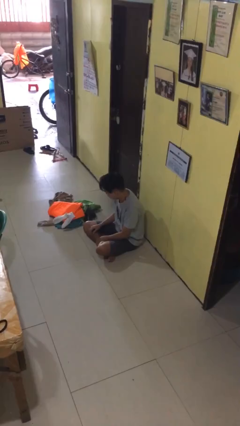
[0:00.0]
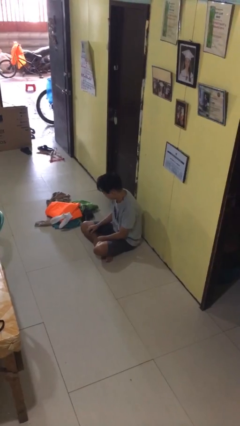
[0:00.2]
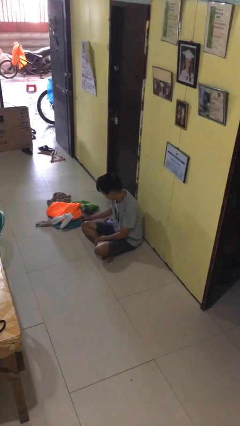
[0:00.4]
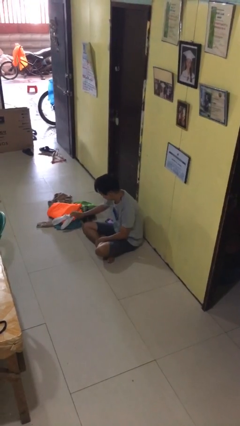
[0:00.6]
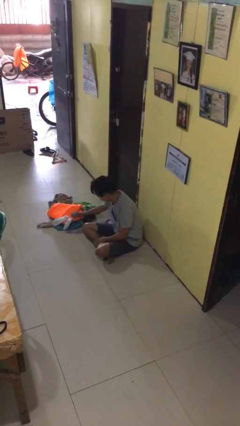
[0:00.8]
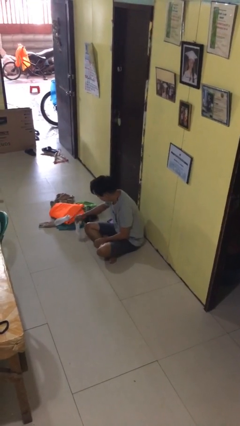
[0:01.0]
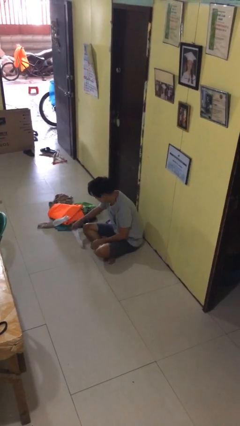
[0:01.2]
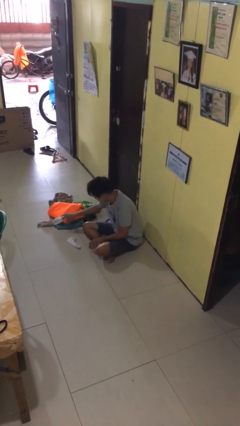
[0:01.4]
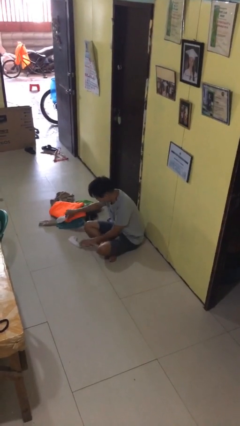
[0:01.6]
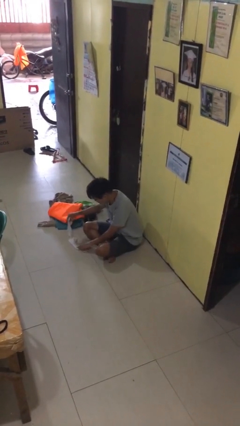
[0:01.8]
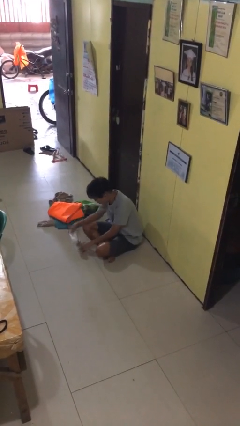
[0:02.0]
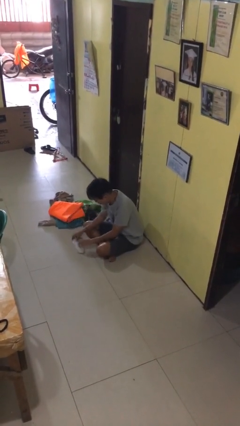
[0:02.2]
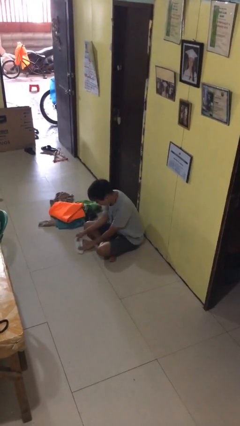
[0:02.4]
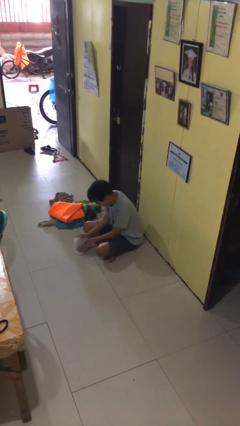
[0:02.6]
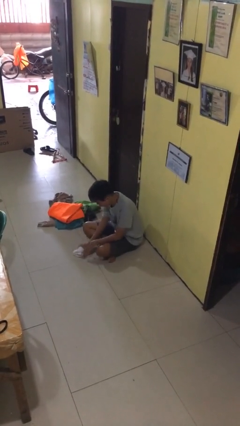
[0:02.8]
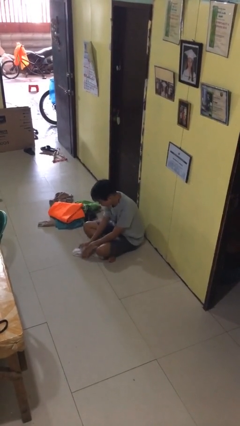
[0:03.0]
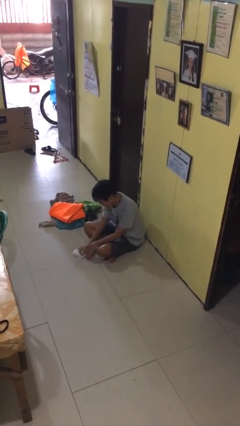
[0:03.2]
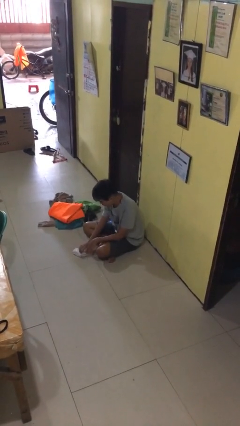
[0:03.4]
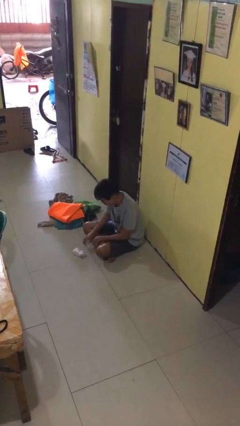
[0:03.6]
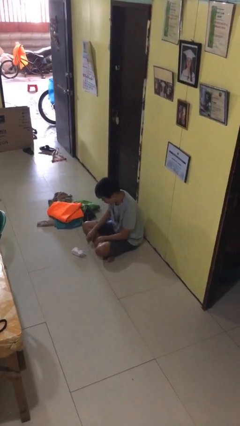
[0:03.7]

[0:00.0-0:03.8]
person folds socks

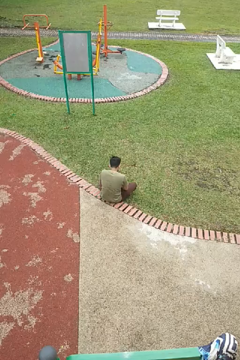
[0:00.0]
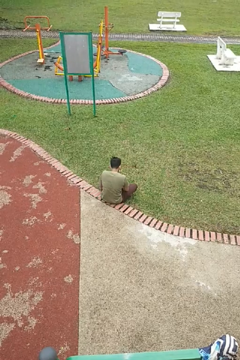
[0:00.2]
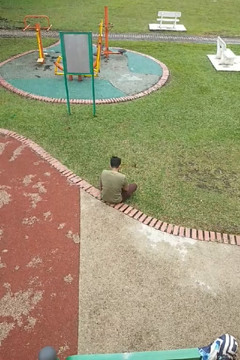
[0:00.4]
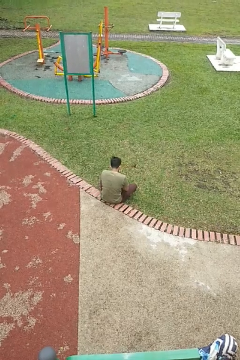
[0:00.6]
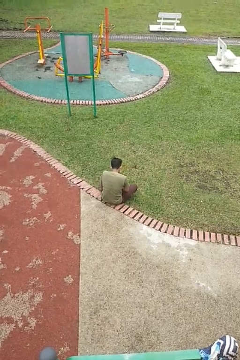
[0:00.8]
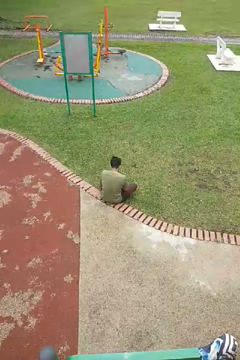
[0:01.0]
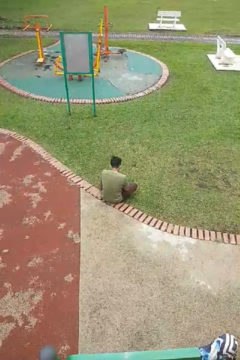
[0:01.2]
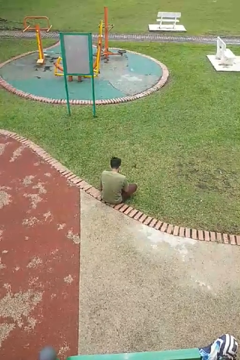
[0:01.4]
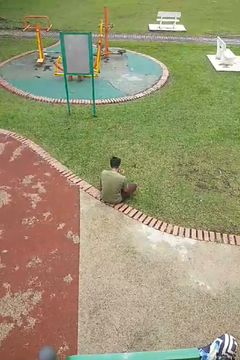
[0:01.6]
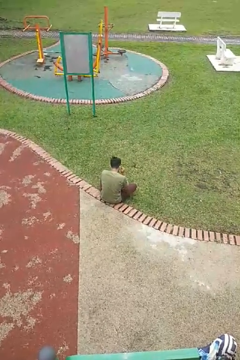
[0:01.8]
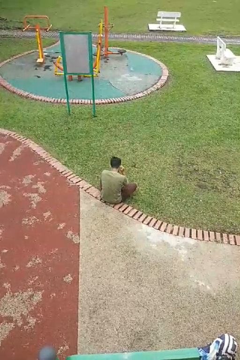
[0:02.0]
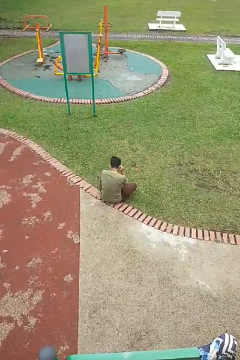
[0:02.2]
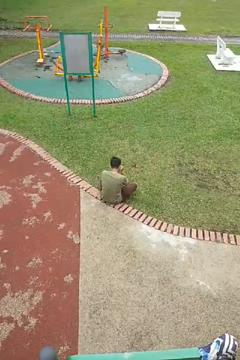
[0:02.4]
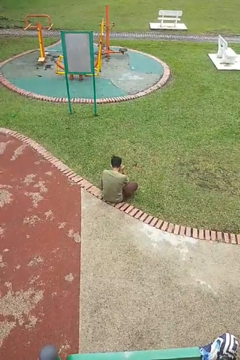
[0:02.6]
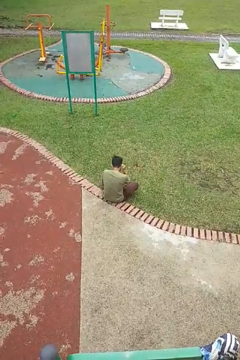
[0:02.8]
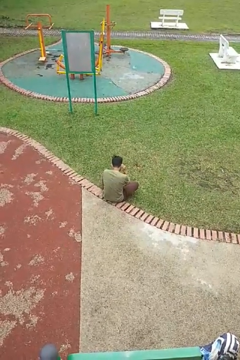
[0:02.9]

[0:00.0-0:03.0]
person touches earlobe

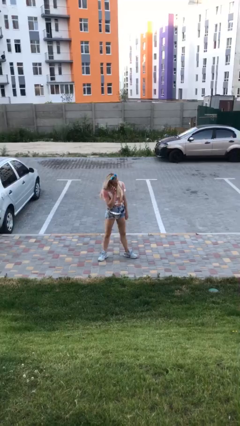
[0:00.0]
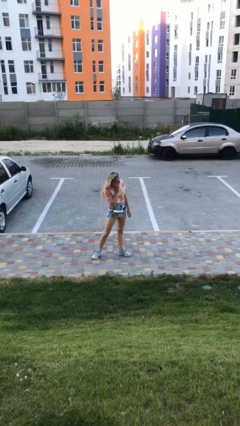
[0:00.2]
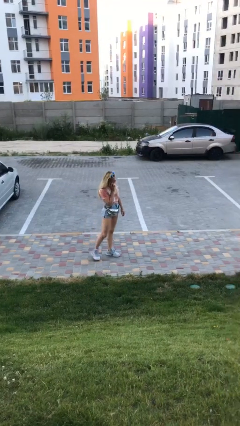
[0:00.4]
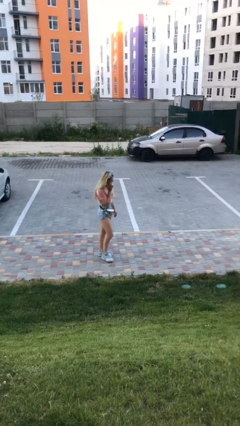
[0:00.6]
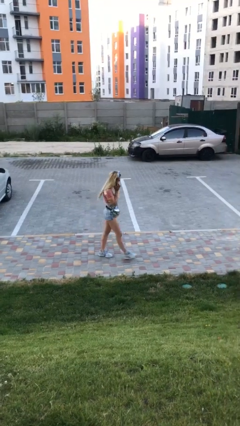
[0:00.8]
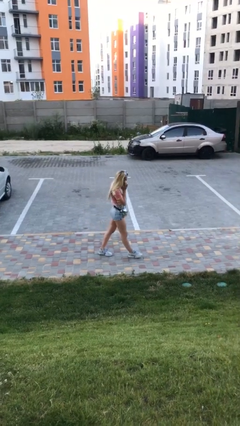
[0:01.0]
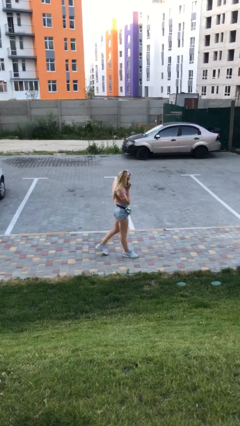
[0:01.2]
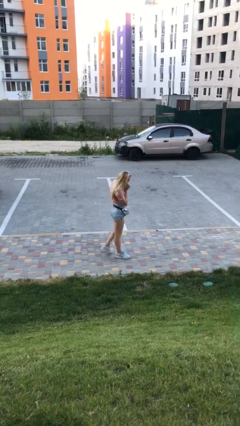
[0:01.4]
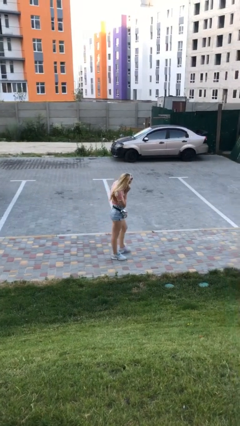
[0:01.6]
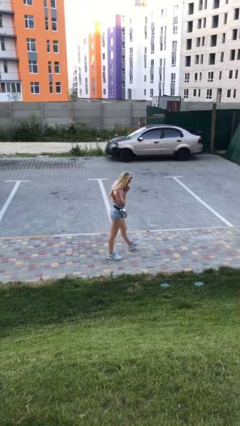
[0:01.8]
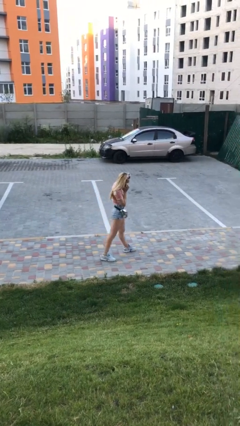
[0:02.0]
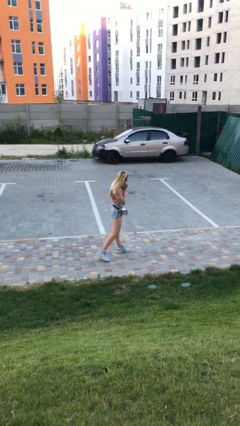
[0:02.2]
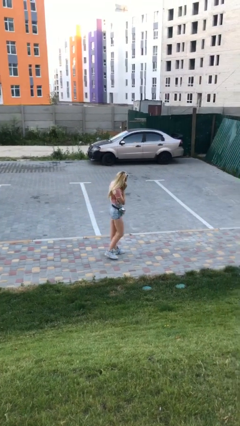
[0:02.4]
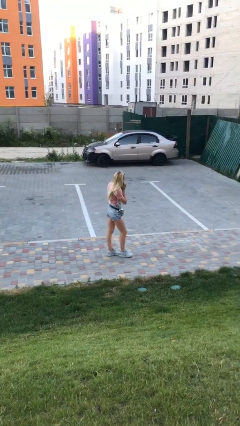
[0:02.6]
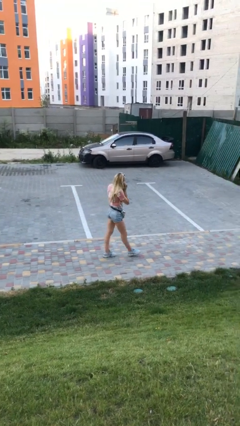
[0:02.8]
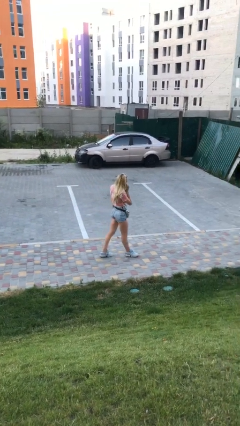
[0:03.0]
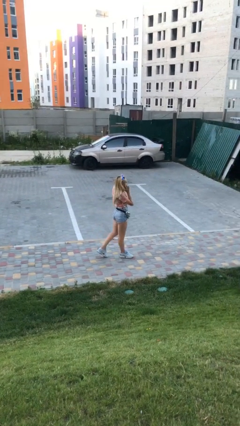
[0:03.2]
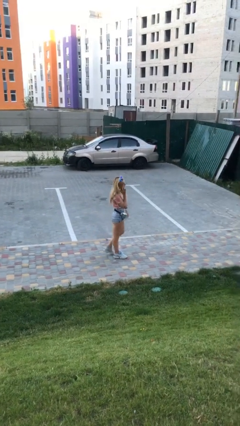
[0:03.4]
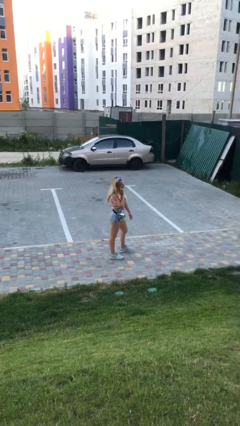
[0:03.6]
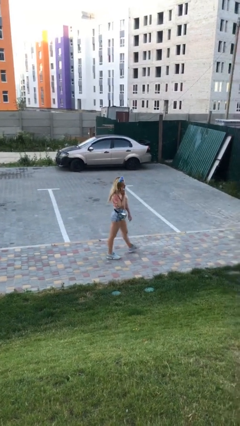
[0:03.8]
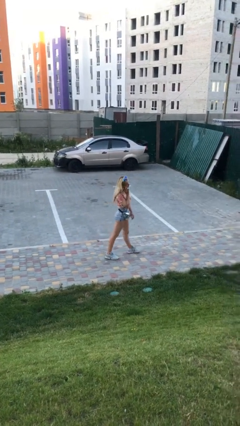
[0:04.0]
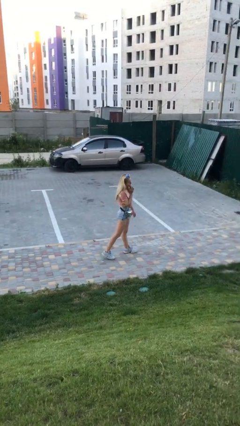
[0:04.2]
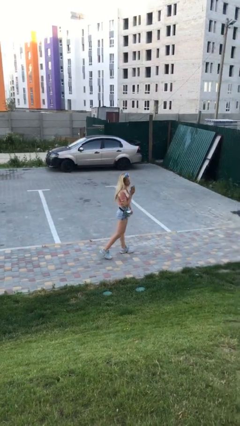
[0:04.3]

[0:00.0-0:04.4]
person talks on phone

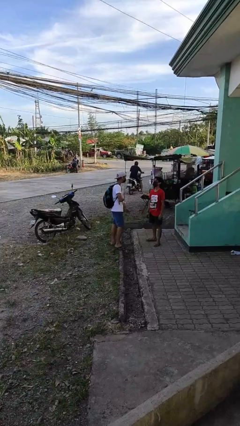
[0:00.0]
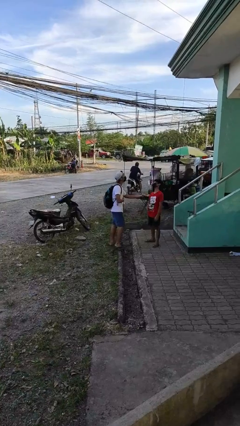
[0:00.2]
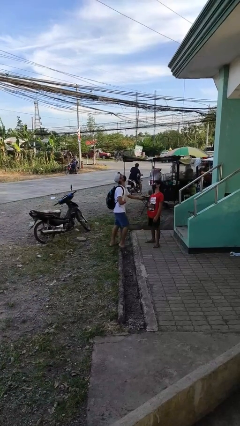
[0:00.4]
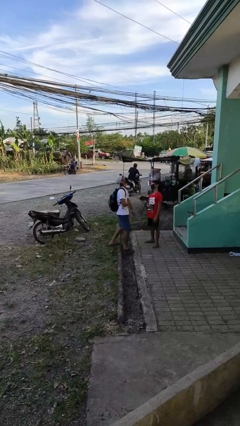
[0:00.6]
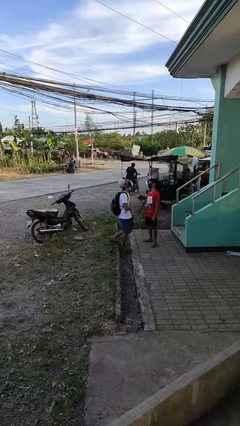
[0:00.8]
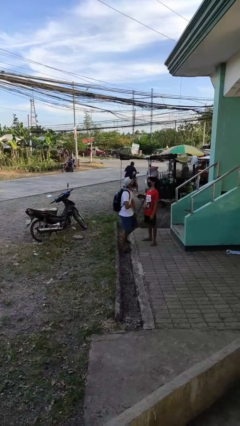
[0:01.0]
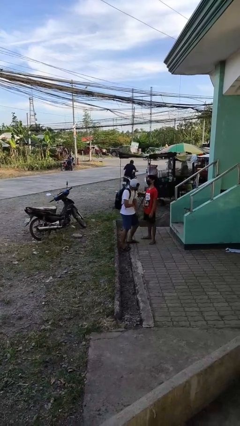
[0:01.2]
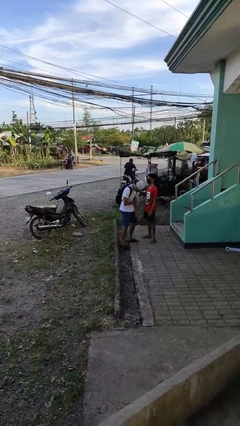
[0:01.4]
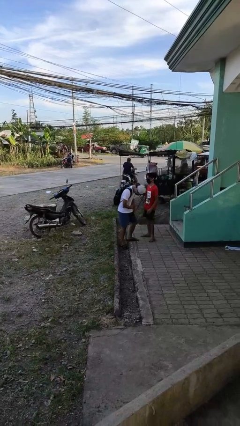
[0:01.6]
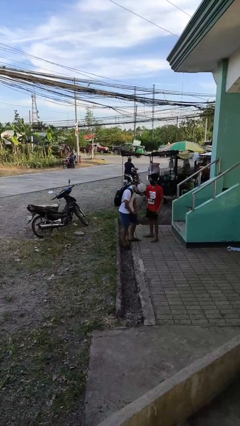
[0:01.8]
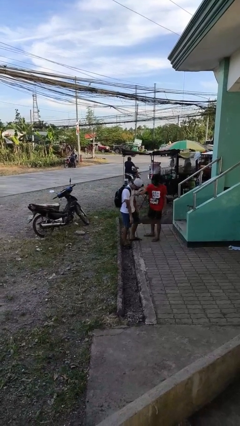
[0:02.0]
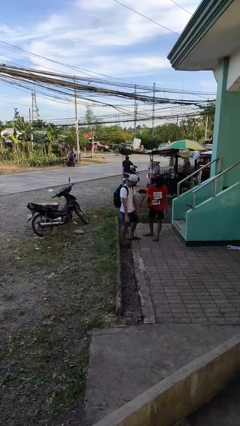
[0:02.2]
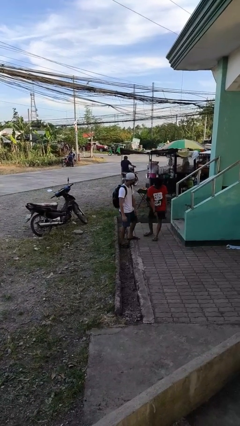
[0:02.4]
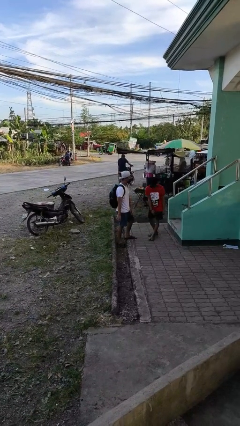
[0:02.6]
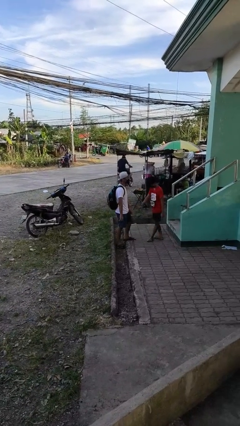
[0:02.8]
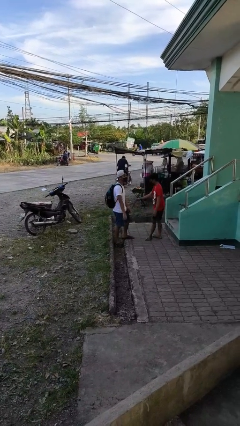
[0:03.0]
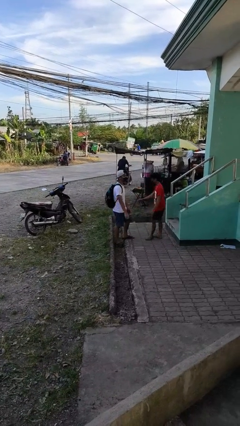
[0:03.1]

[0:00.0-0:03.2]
person laughs with person

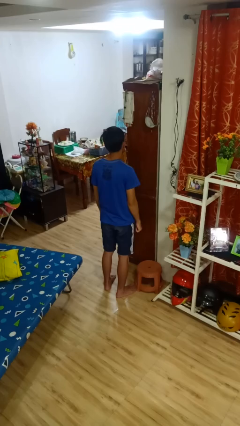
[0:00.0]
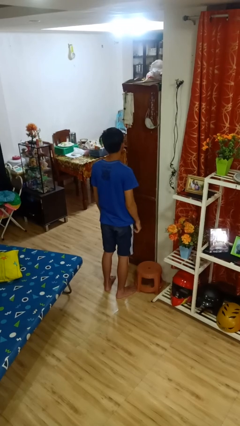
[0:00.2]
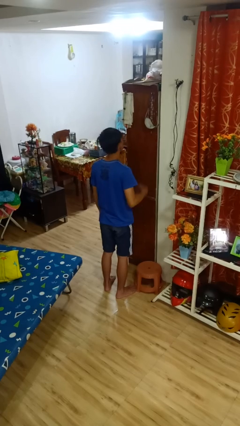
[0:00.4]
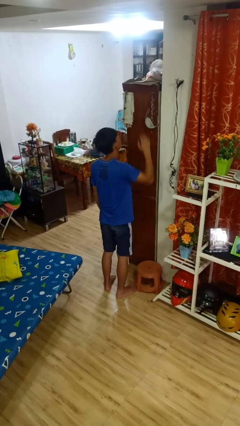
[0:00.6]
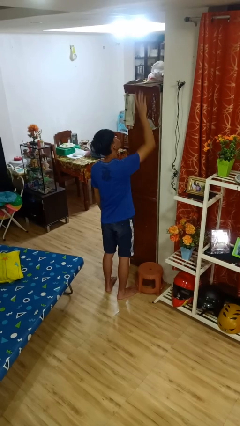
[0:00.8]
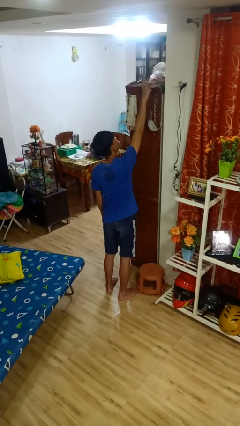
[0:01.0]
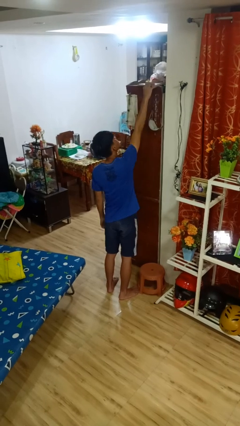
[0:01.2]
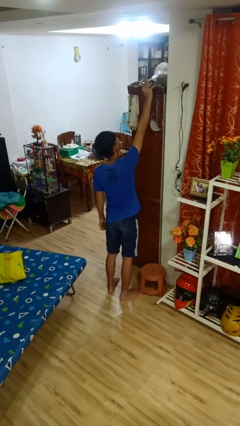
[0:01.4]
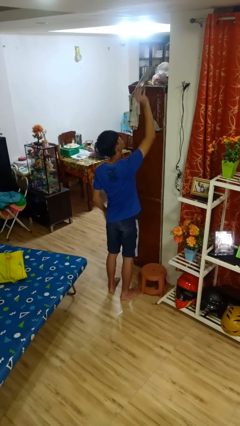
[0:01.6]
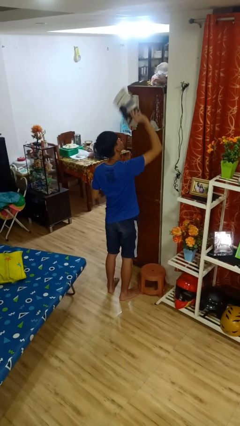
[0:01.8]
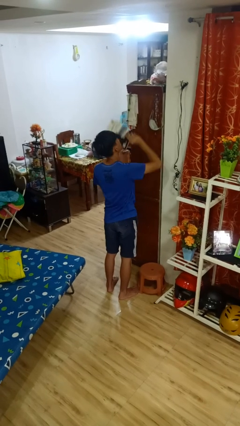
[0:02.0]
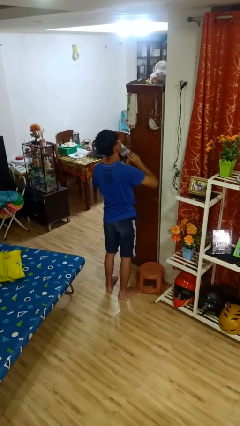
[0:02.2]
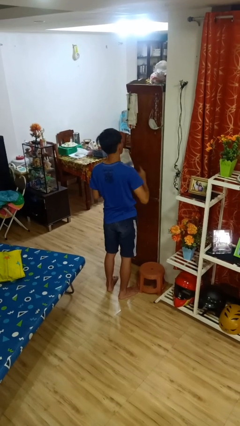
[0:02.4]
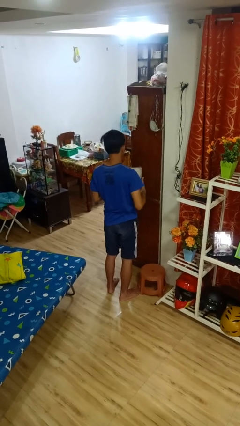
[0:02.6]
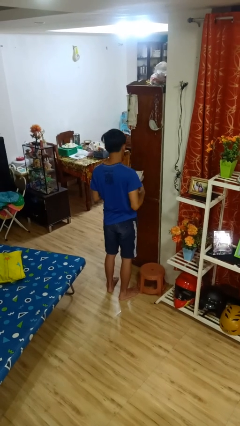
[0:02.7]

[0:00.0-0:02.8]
person picks up object from shelf

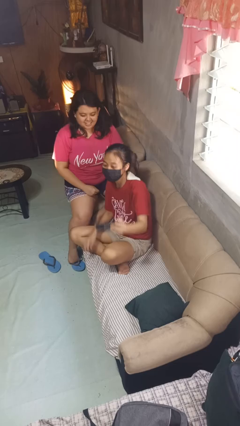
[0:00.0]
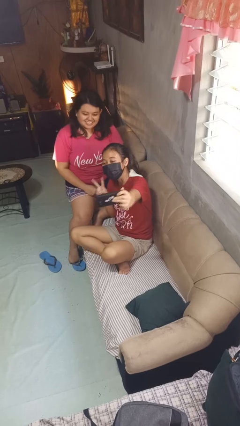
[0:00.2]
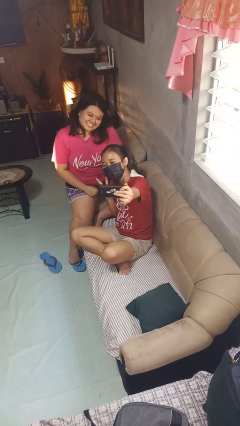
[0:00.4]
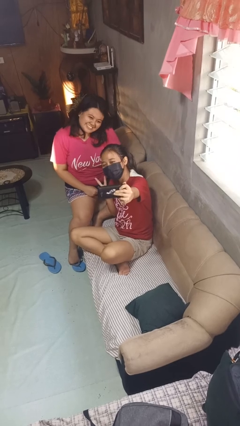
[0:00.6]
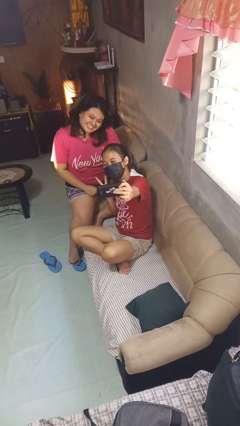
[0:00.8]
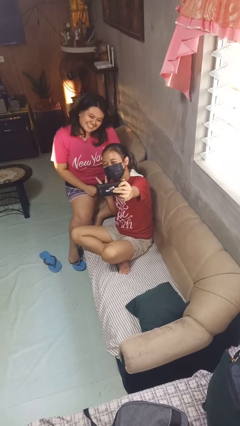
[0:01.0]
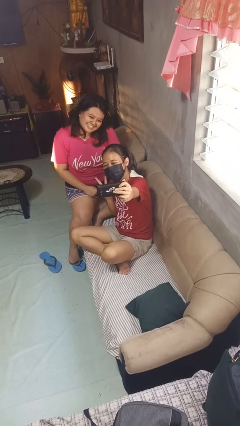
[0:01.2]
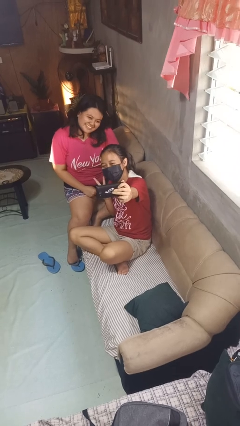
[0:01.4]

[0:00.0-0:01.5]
person takes selfie with person
